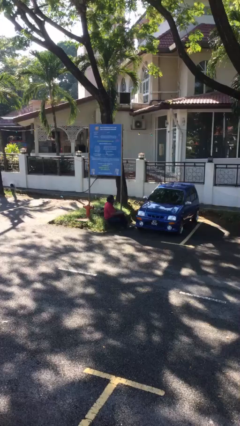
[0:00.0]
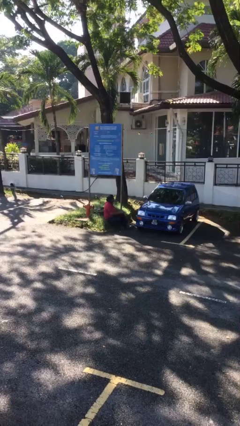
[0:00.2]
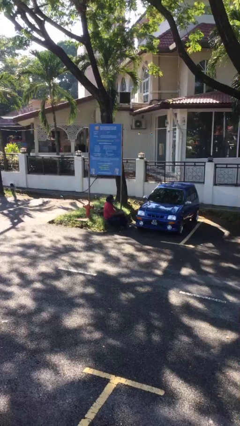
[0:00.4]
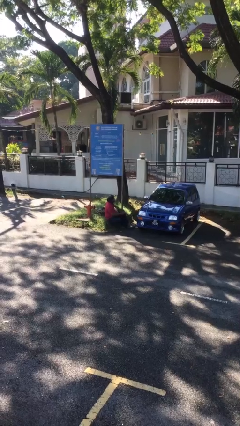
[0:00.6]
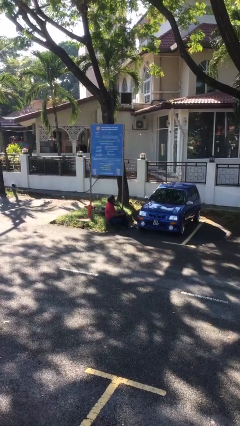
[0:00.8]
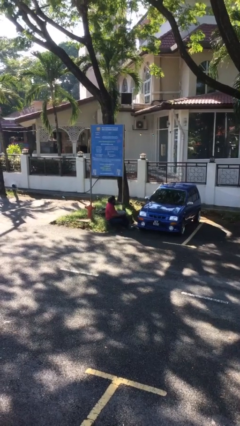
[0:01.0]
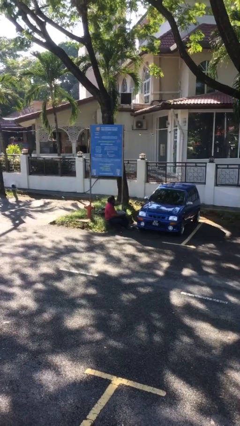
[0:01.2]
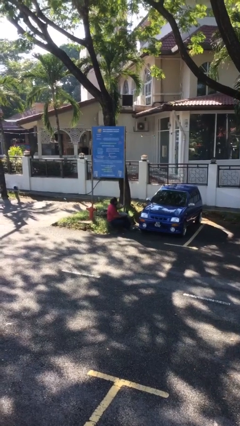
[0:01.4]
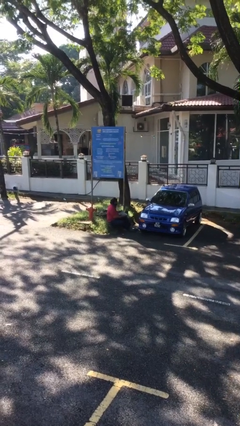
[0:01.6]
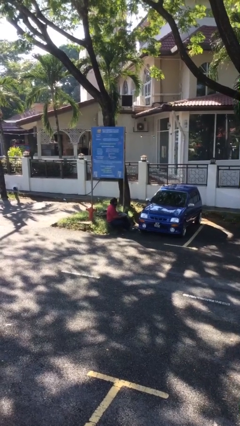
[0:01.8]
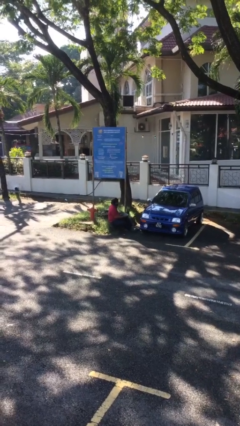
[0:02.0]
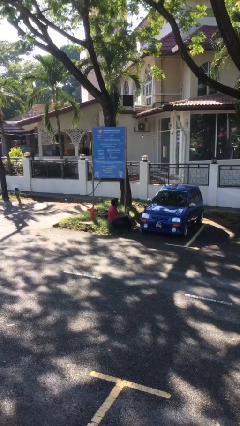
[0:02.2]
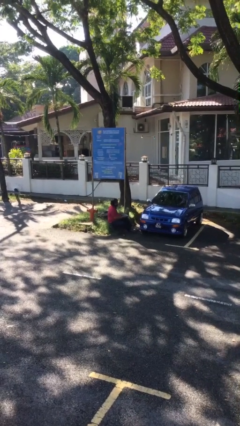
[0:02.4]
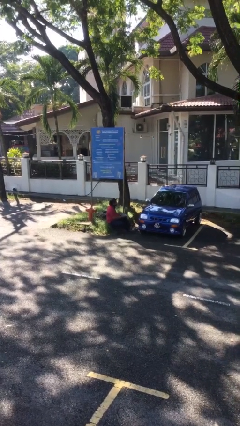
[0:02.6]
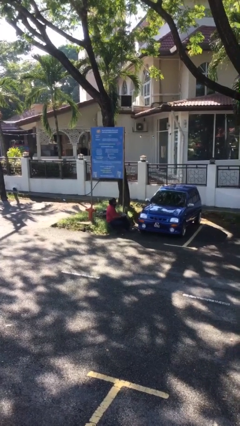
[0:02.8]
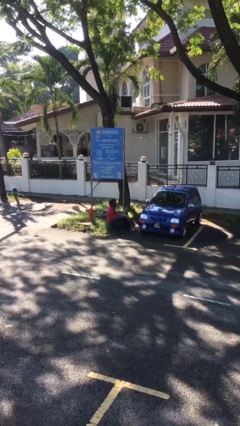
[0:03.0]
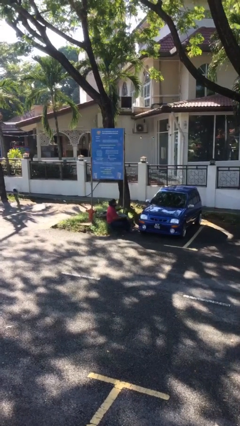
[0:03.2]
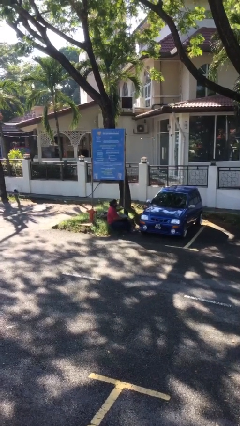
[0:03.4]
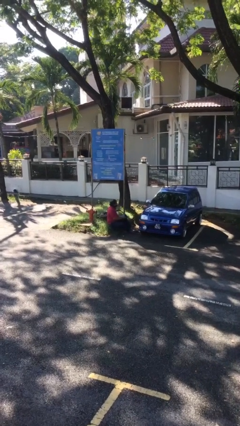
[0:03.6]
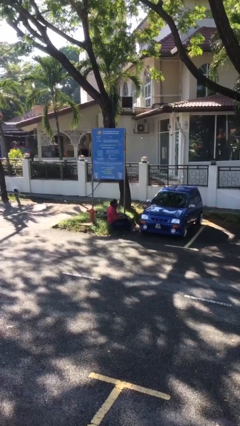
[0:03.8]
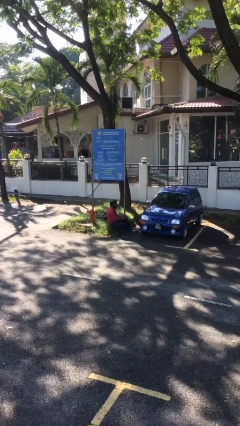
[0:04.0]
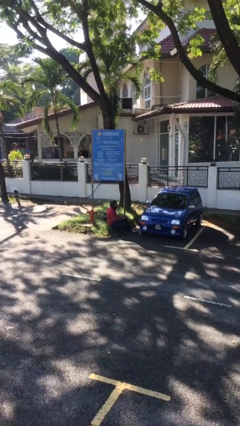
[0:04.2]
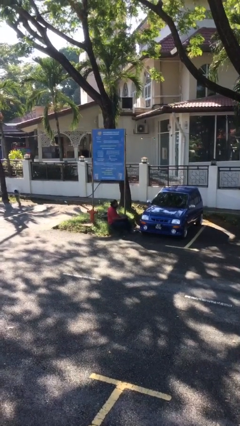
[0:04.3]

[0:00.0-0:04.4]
person interacts with laptop

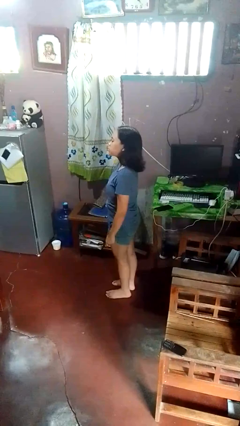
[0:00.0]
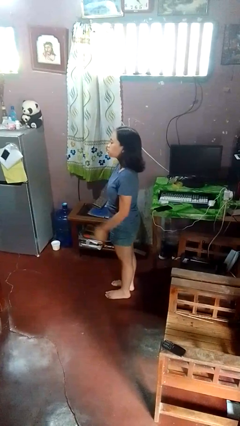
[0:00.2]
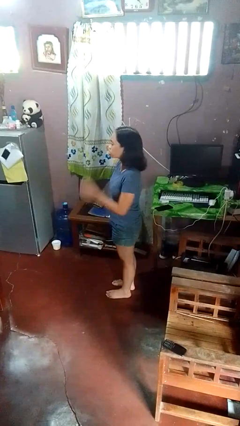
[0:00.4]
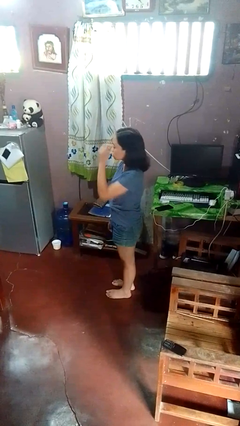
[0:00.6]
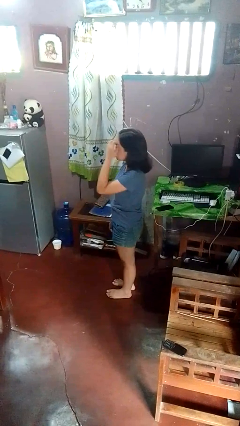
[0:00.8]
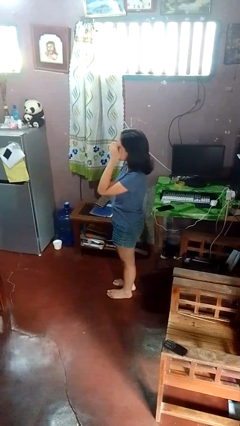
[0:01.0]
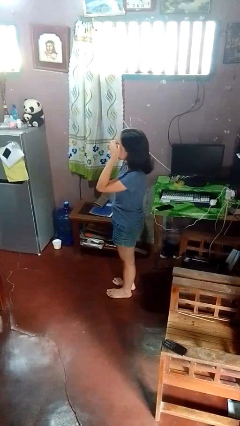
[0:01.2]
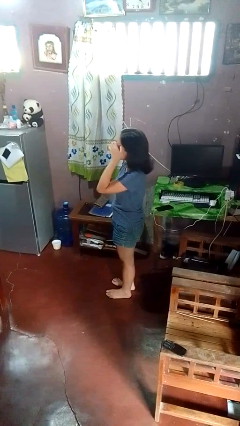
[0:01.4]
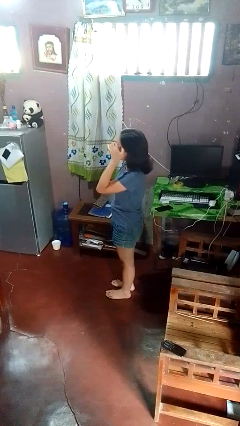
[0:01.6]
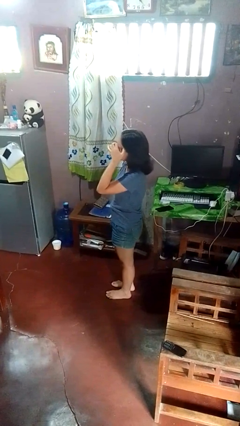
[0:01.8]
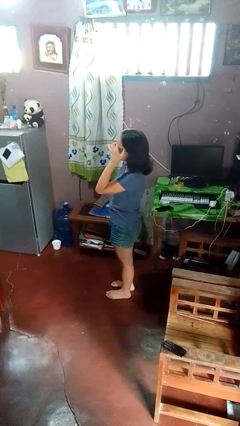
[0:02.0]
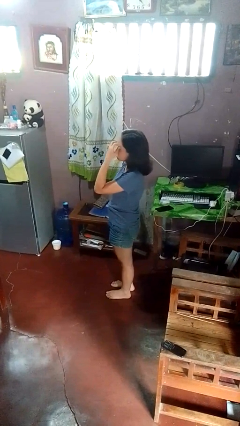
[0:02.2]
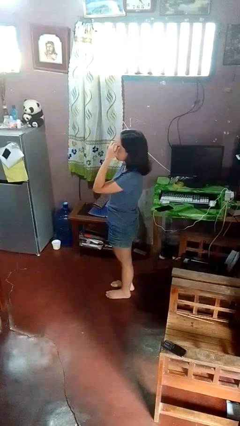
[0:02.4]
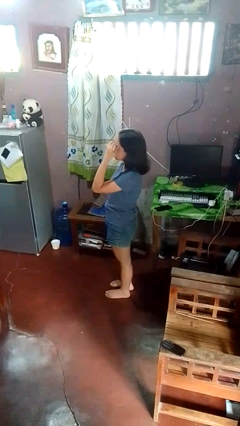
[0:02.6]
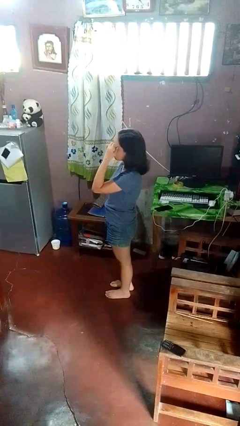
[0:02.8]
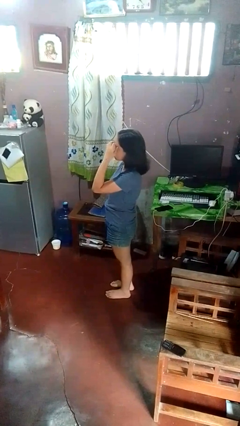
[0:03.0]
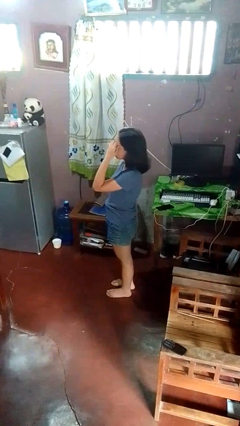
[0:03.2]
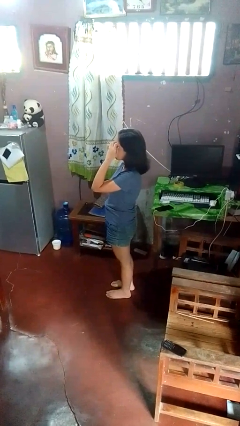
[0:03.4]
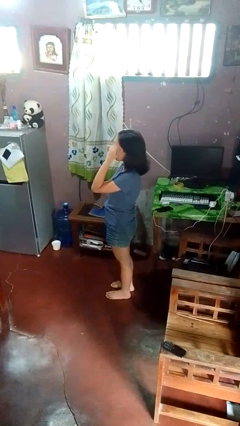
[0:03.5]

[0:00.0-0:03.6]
person scratches face

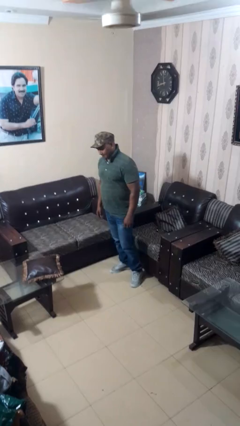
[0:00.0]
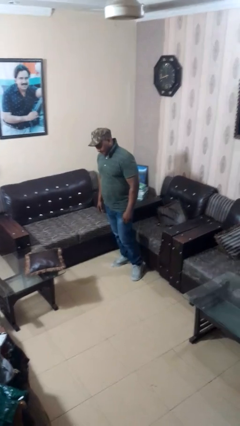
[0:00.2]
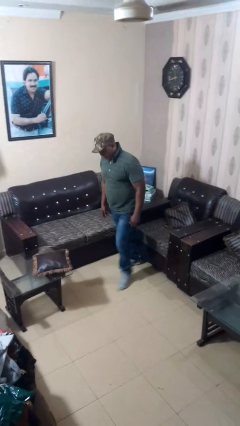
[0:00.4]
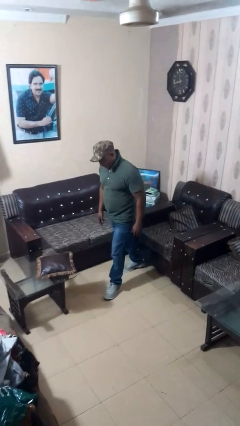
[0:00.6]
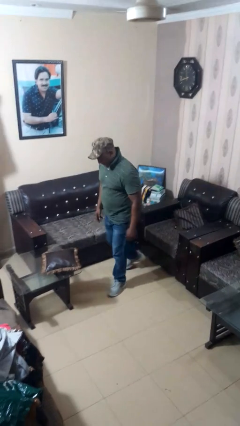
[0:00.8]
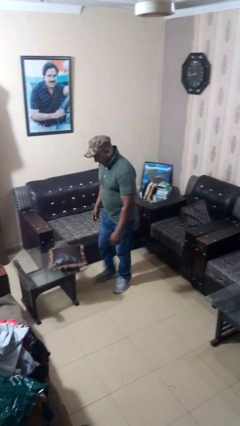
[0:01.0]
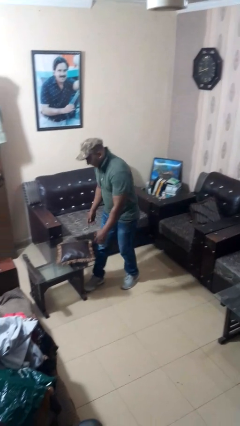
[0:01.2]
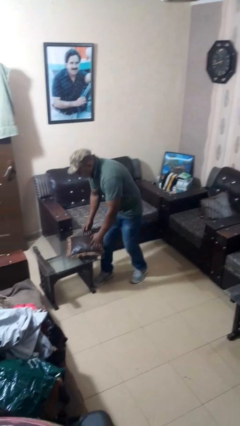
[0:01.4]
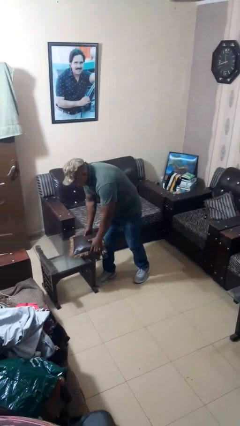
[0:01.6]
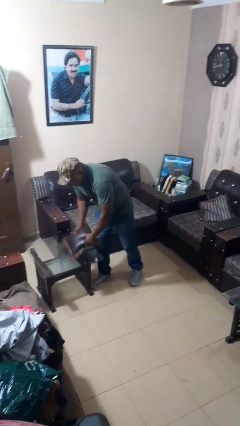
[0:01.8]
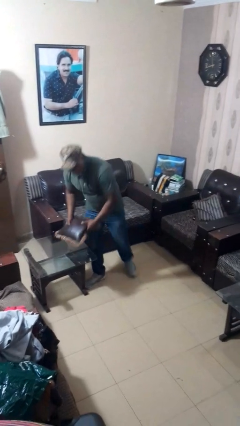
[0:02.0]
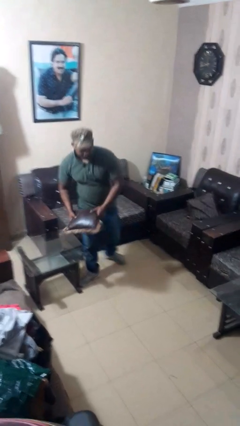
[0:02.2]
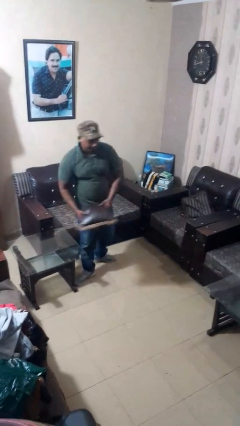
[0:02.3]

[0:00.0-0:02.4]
person picks up object from table

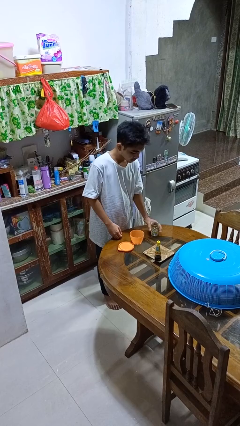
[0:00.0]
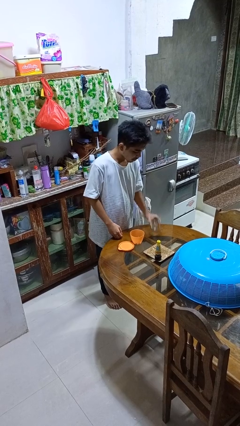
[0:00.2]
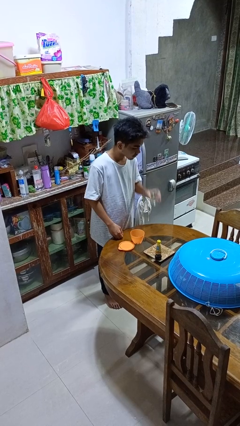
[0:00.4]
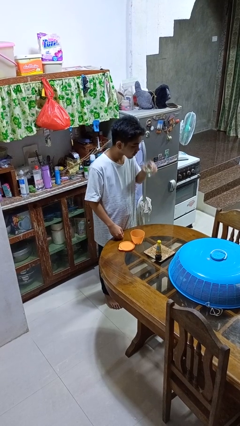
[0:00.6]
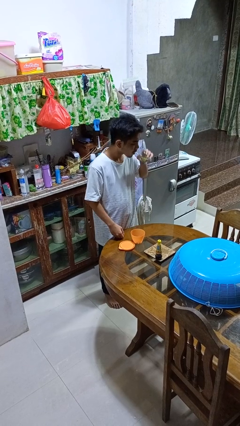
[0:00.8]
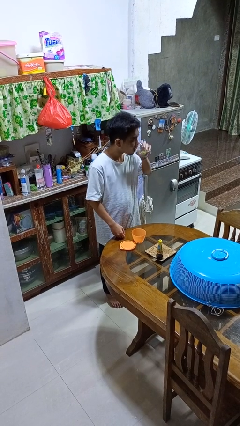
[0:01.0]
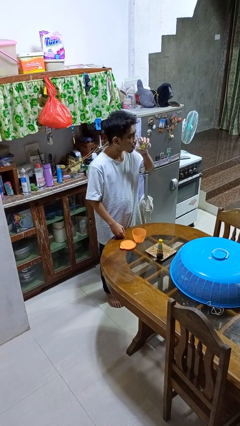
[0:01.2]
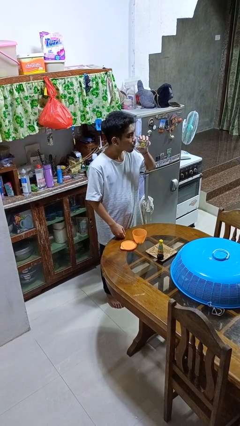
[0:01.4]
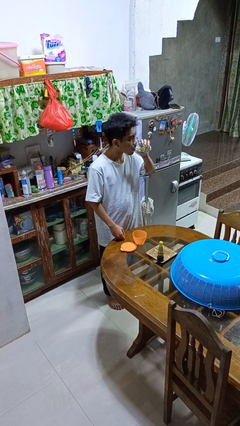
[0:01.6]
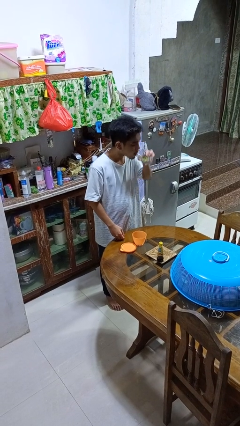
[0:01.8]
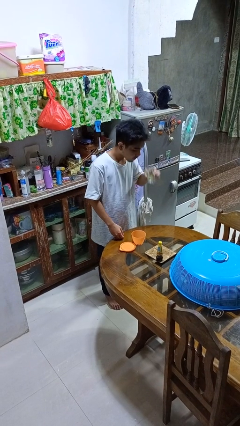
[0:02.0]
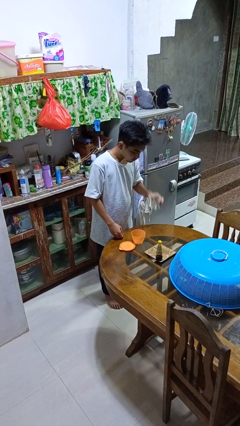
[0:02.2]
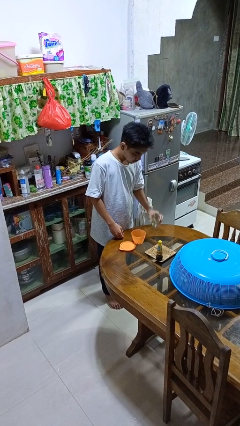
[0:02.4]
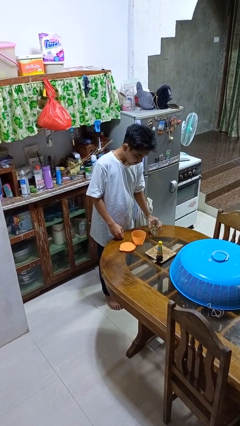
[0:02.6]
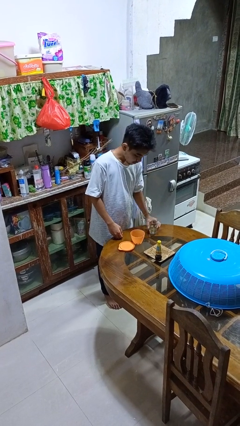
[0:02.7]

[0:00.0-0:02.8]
person drinks from cup

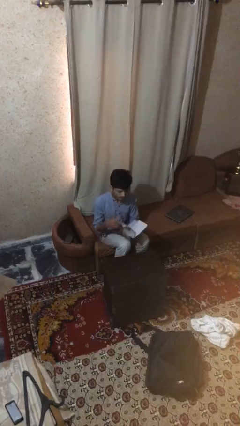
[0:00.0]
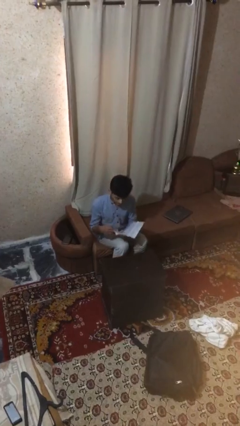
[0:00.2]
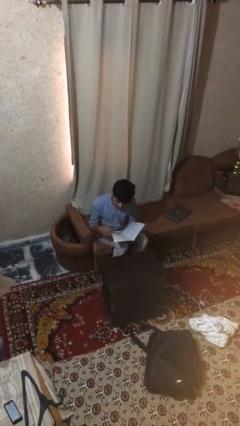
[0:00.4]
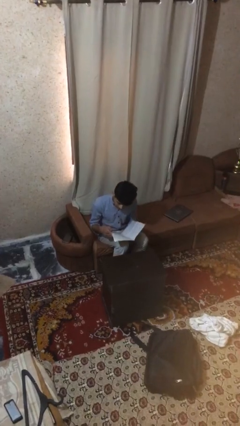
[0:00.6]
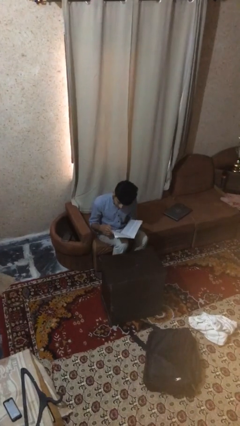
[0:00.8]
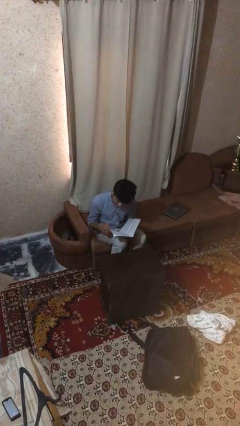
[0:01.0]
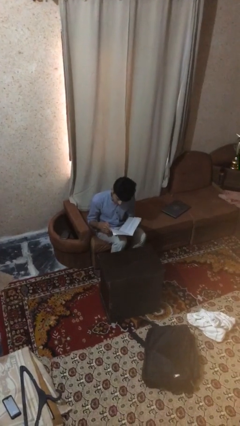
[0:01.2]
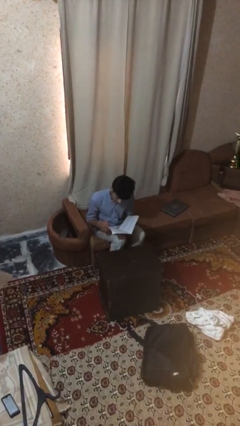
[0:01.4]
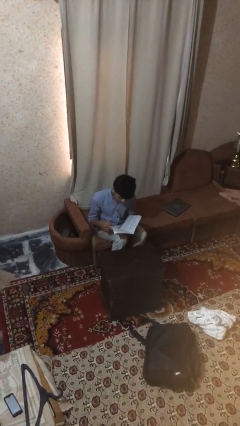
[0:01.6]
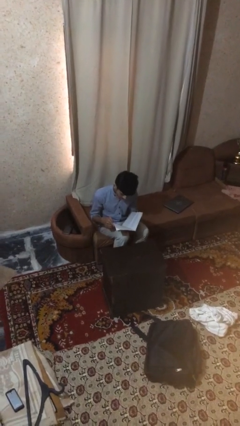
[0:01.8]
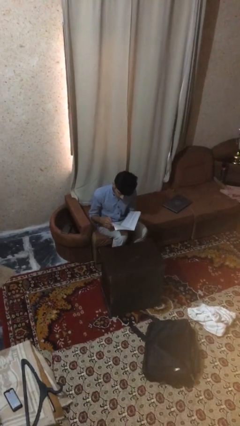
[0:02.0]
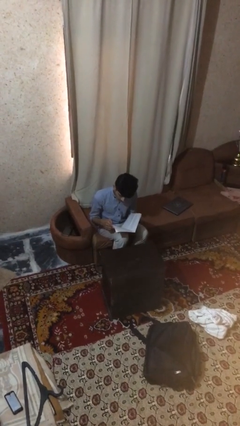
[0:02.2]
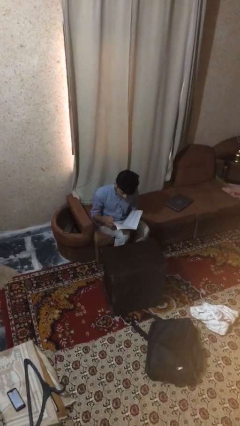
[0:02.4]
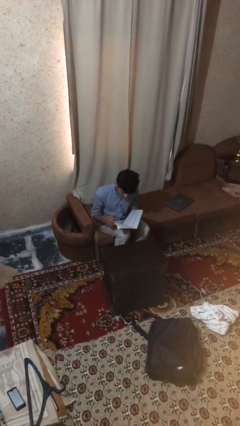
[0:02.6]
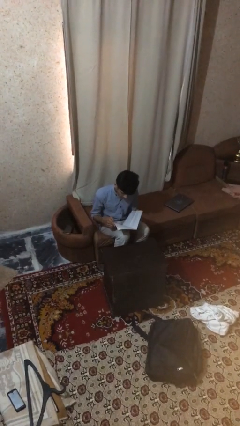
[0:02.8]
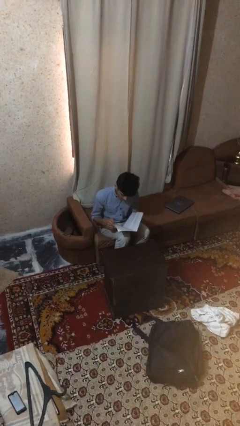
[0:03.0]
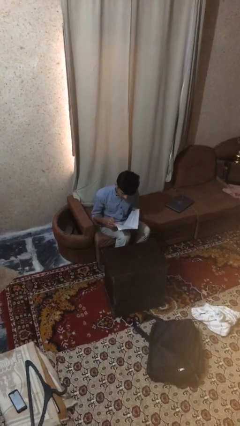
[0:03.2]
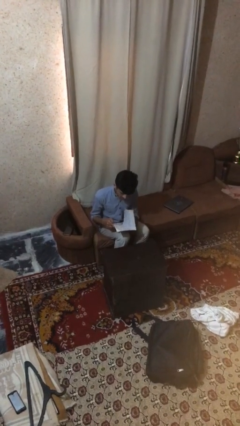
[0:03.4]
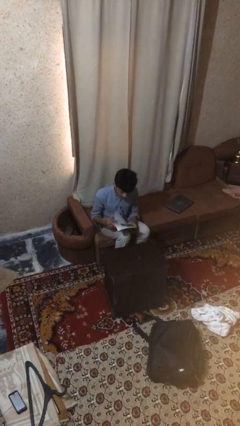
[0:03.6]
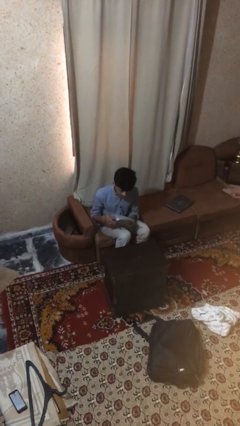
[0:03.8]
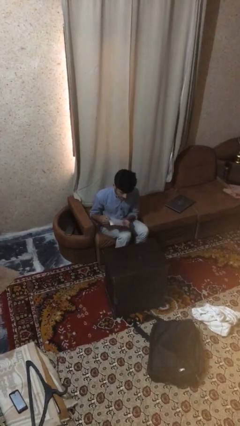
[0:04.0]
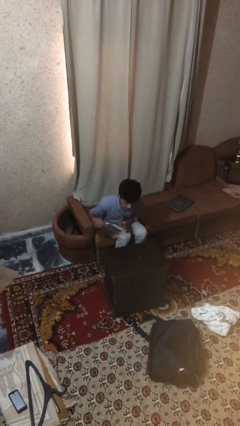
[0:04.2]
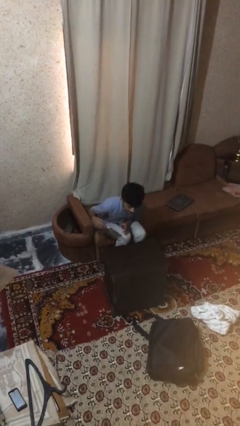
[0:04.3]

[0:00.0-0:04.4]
person reads document
